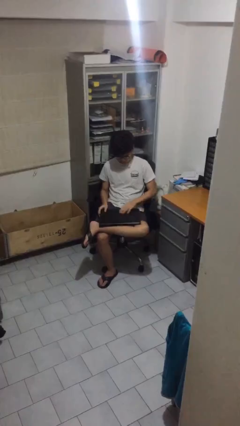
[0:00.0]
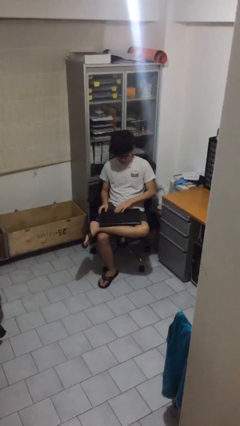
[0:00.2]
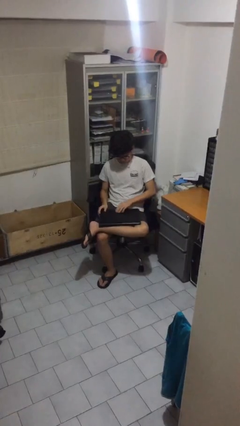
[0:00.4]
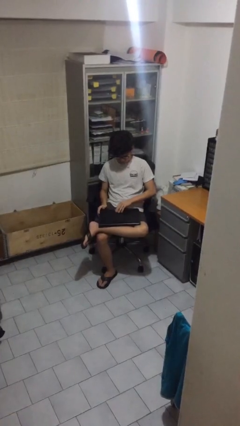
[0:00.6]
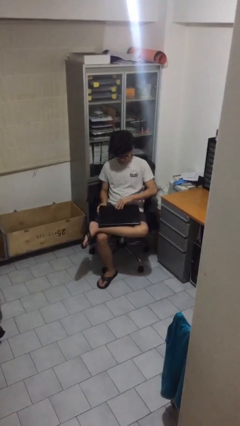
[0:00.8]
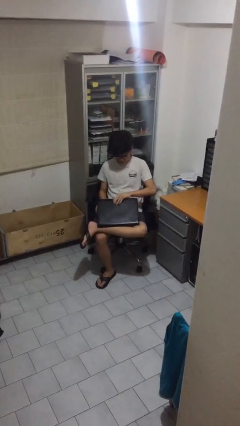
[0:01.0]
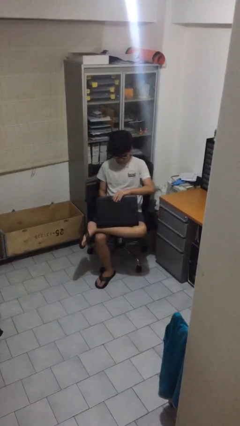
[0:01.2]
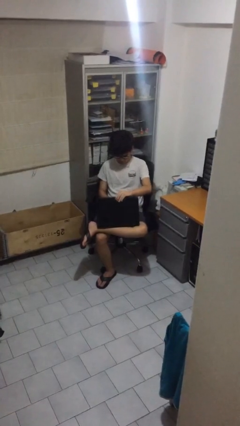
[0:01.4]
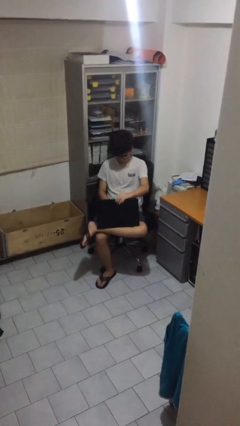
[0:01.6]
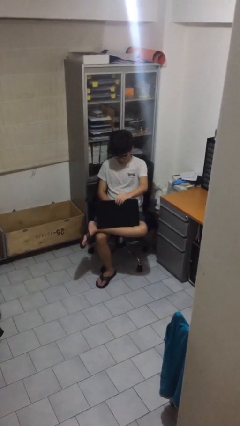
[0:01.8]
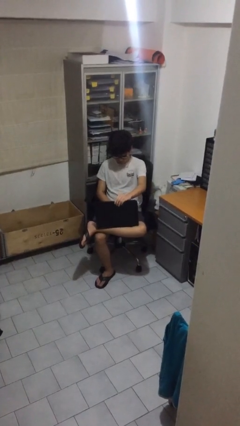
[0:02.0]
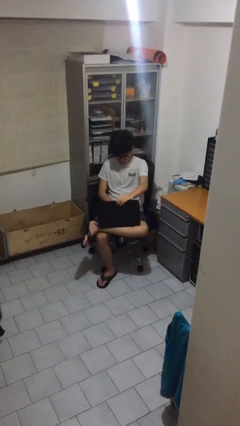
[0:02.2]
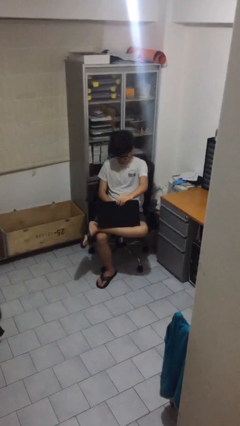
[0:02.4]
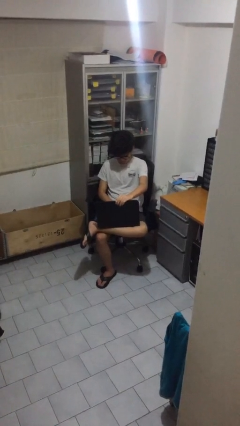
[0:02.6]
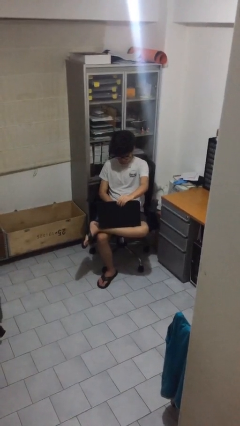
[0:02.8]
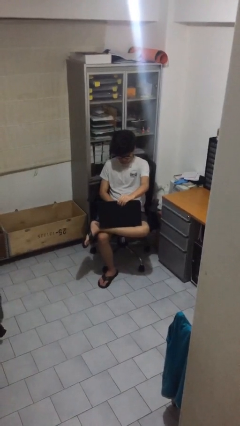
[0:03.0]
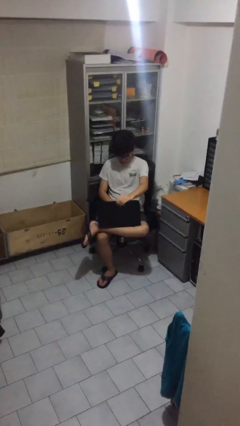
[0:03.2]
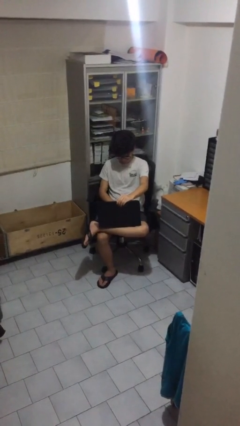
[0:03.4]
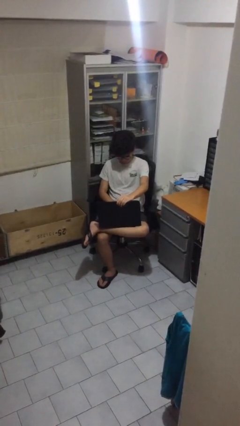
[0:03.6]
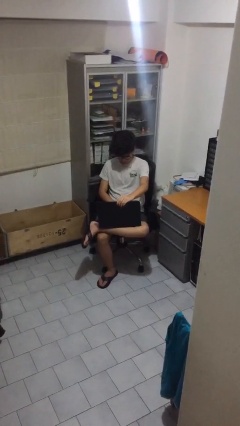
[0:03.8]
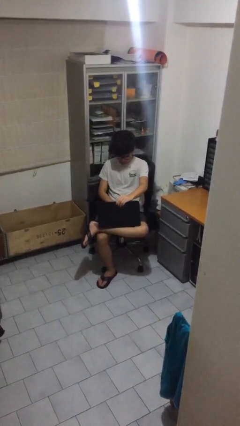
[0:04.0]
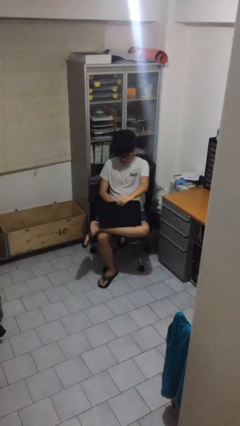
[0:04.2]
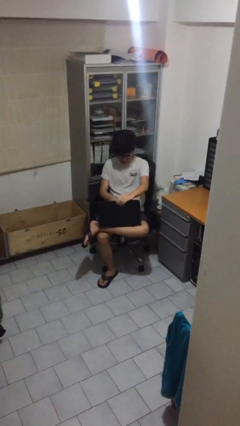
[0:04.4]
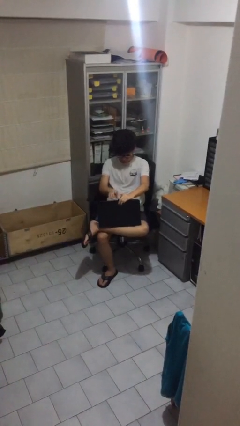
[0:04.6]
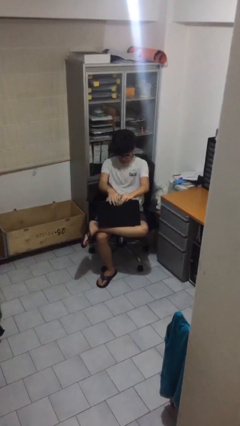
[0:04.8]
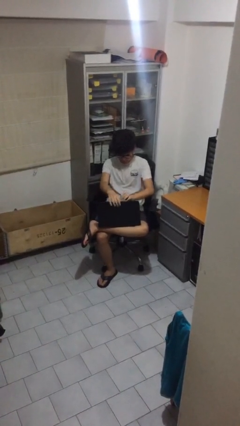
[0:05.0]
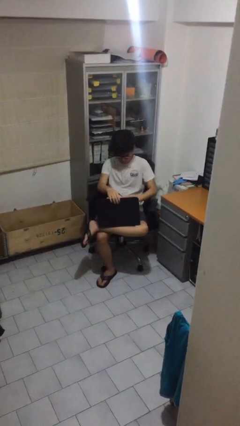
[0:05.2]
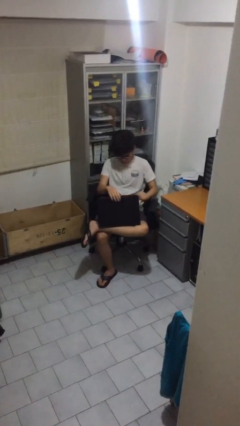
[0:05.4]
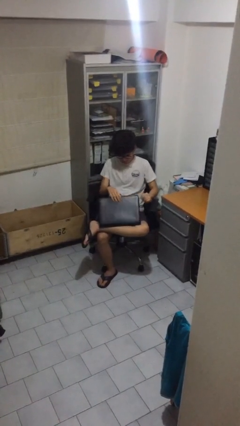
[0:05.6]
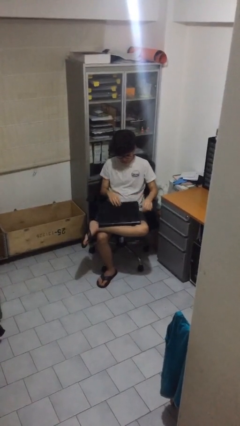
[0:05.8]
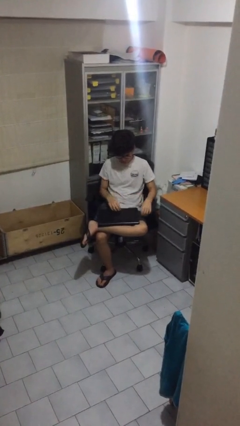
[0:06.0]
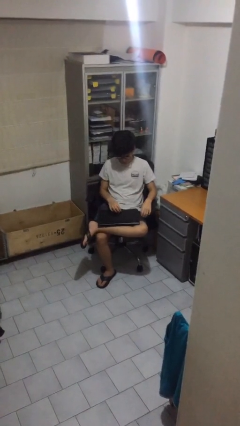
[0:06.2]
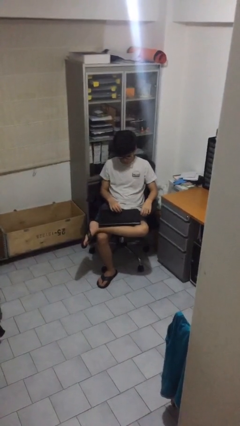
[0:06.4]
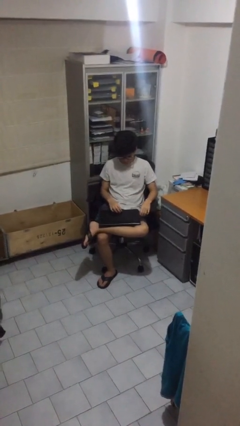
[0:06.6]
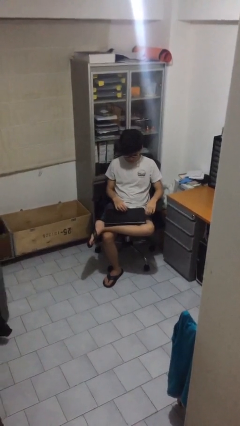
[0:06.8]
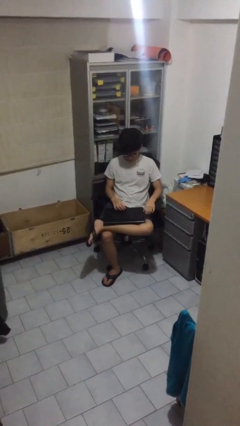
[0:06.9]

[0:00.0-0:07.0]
person interacts with laptop

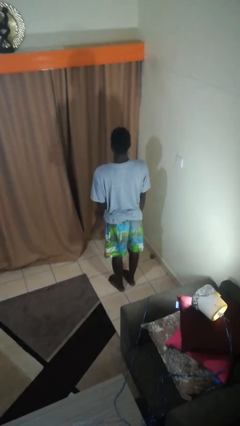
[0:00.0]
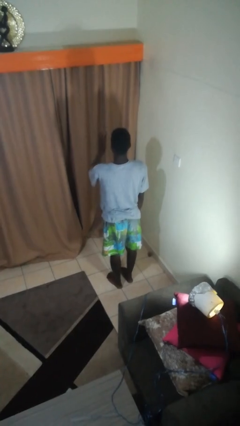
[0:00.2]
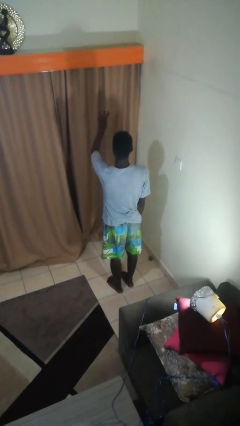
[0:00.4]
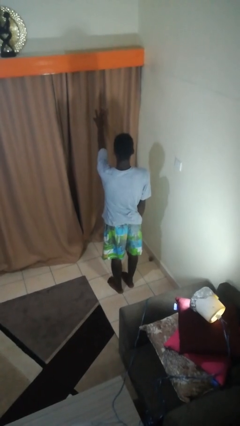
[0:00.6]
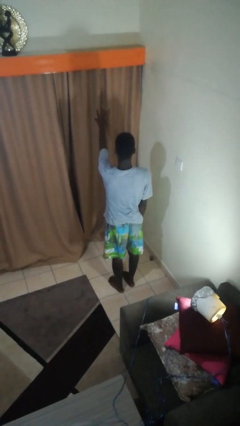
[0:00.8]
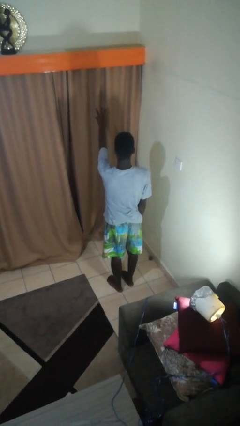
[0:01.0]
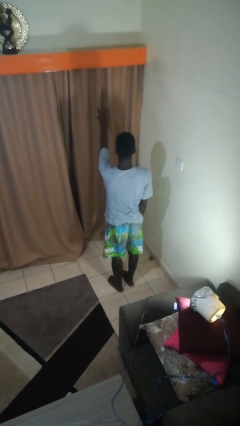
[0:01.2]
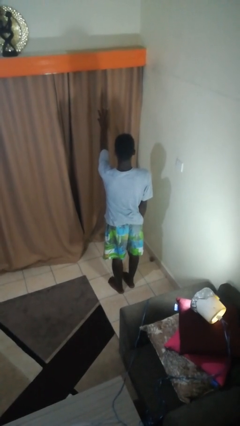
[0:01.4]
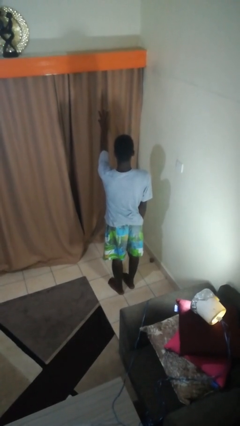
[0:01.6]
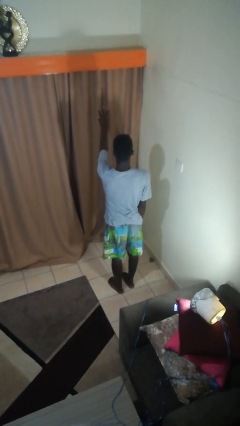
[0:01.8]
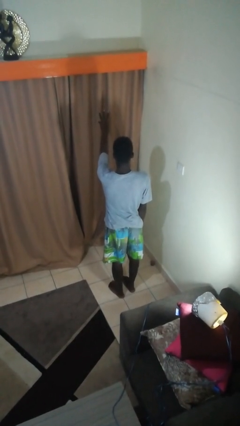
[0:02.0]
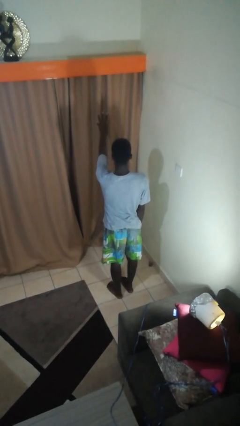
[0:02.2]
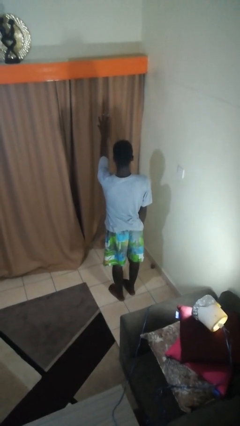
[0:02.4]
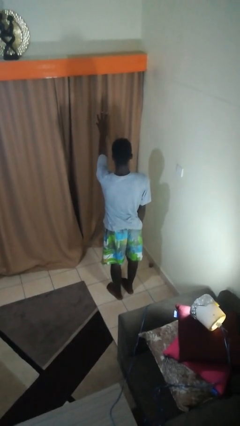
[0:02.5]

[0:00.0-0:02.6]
person gestures number three

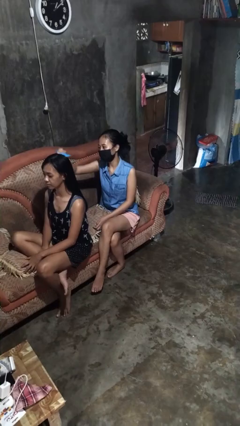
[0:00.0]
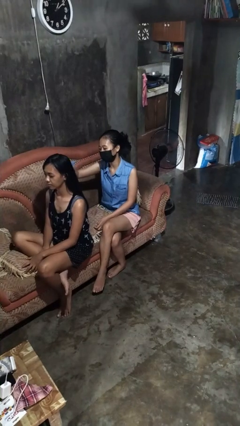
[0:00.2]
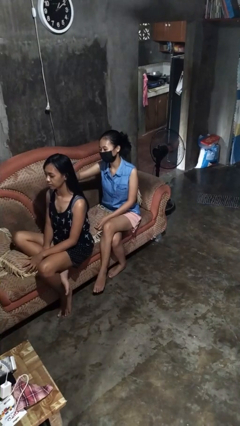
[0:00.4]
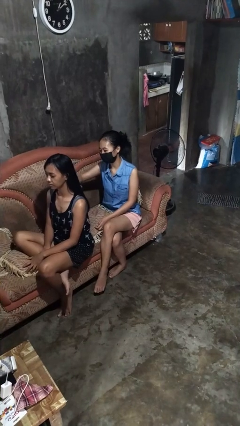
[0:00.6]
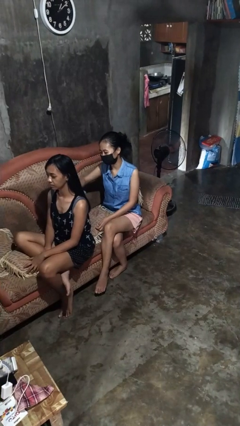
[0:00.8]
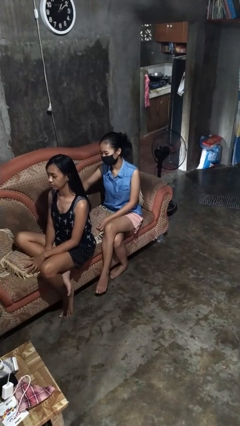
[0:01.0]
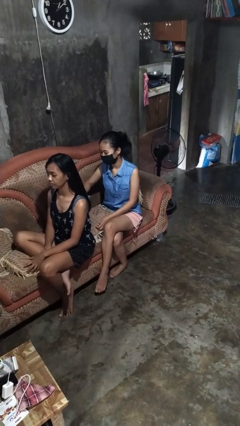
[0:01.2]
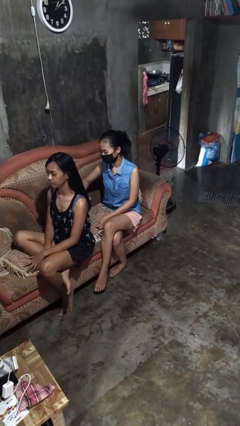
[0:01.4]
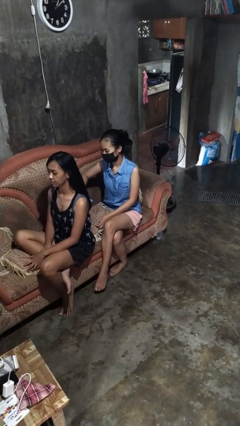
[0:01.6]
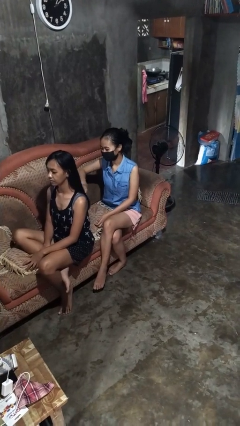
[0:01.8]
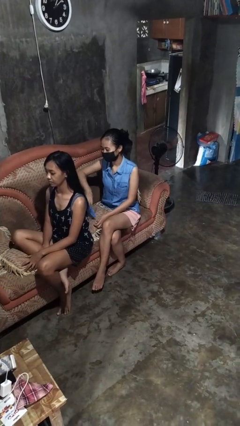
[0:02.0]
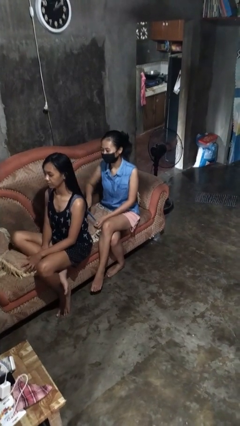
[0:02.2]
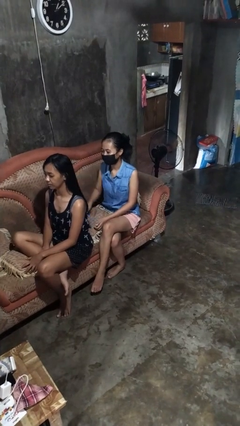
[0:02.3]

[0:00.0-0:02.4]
person brushes hair of person

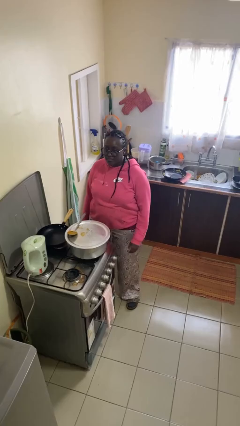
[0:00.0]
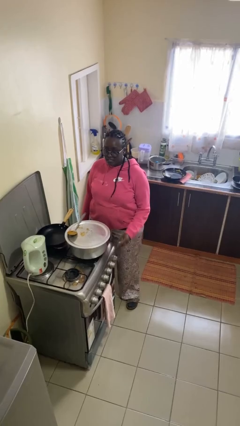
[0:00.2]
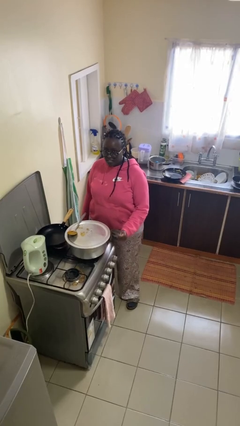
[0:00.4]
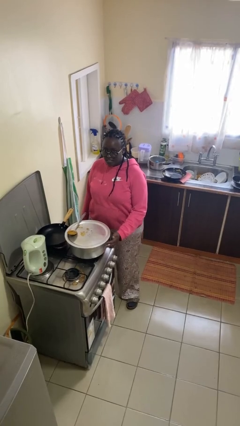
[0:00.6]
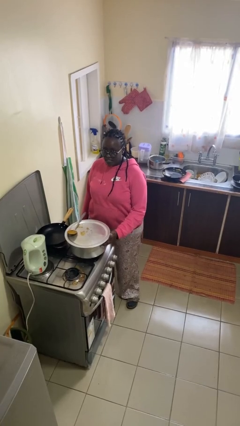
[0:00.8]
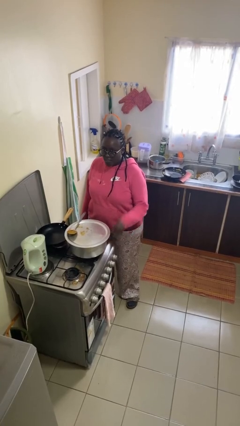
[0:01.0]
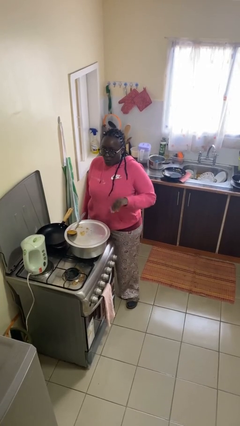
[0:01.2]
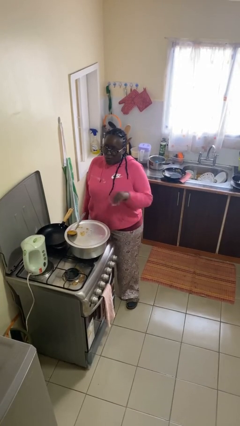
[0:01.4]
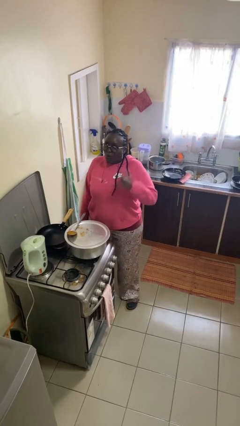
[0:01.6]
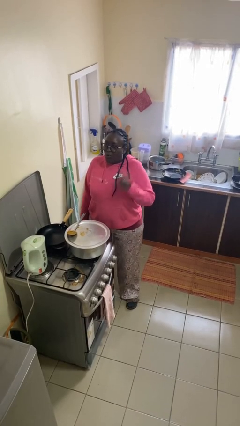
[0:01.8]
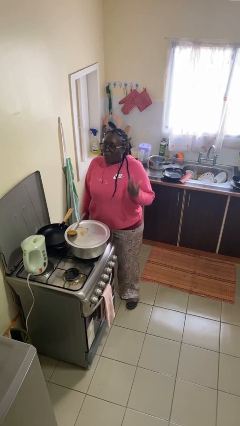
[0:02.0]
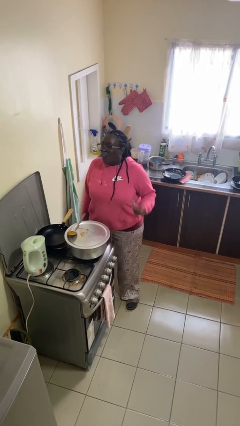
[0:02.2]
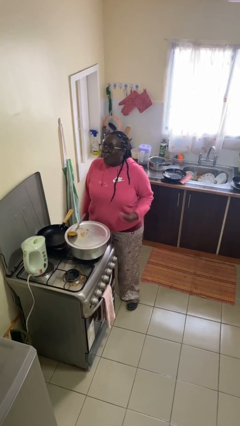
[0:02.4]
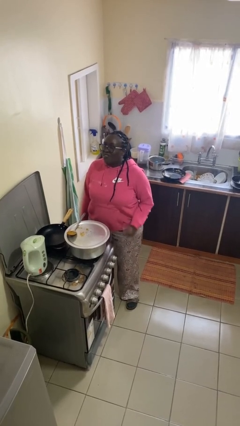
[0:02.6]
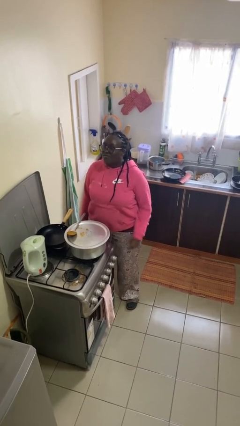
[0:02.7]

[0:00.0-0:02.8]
person burns hand

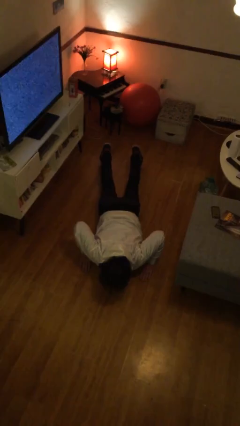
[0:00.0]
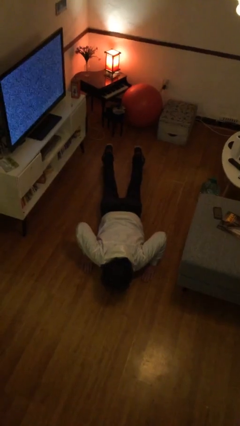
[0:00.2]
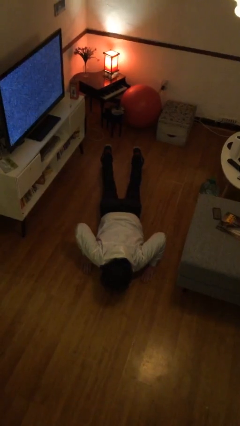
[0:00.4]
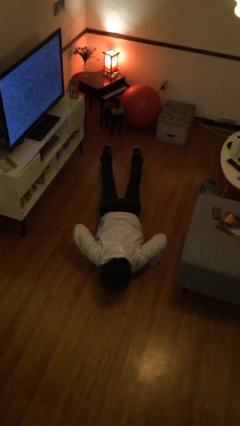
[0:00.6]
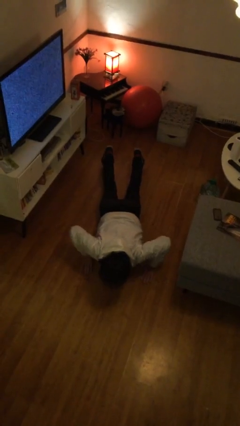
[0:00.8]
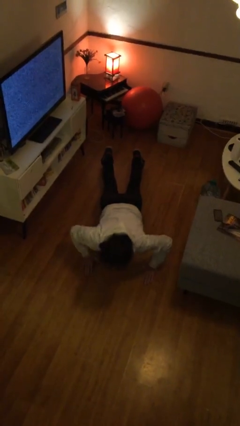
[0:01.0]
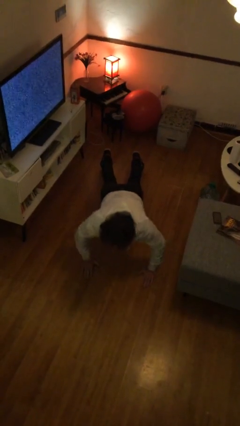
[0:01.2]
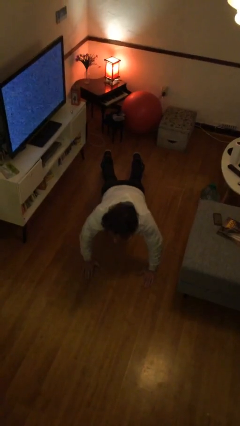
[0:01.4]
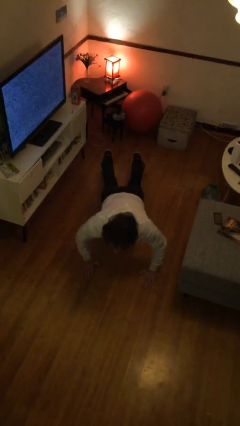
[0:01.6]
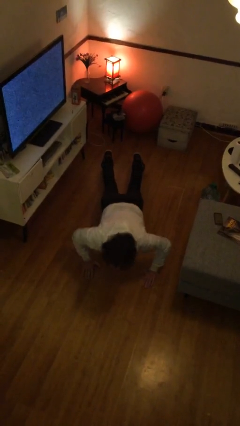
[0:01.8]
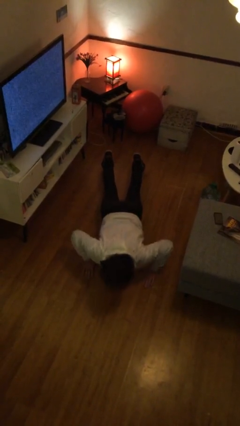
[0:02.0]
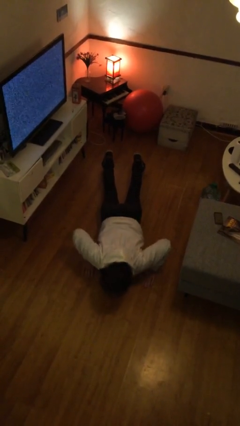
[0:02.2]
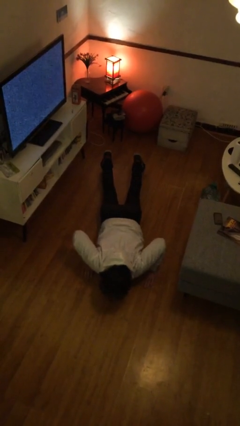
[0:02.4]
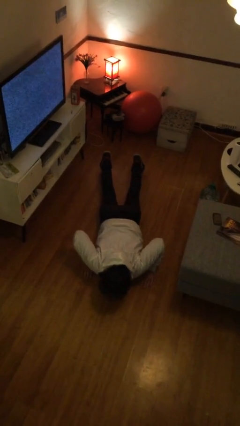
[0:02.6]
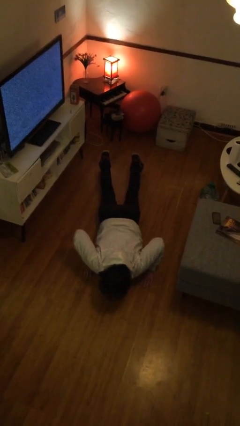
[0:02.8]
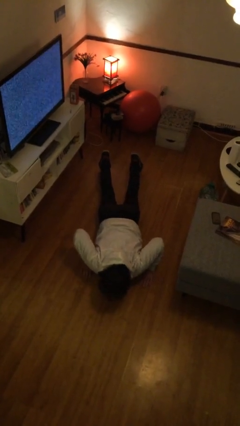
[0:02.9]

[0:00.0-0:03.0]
person exercises with pushup
